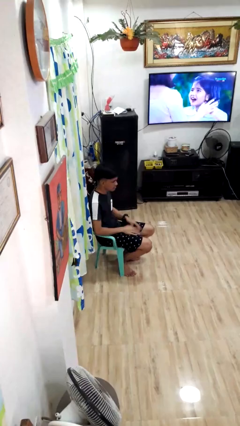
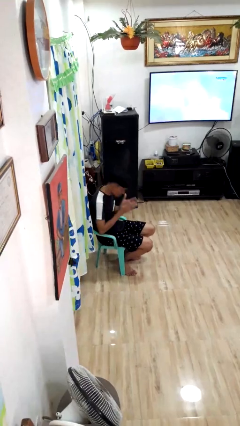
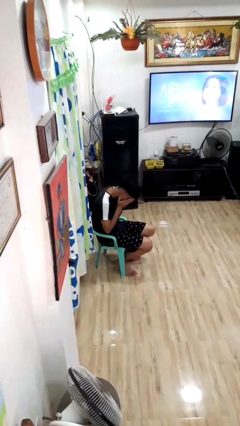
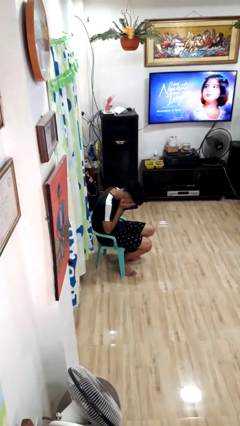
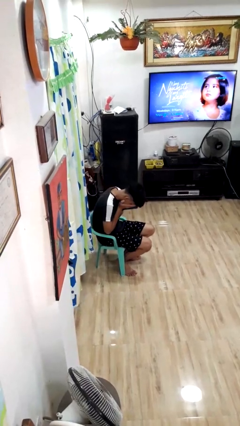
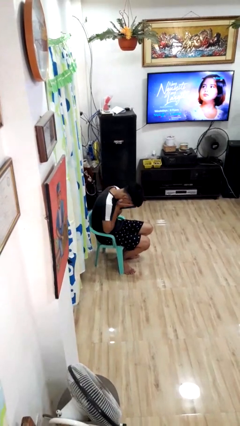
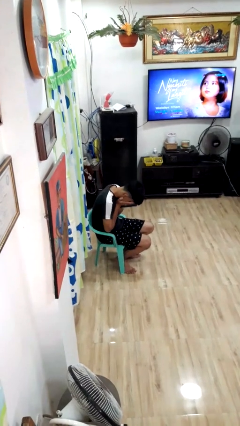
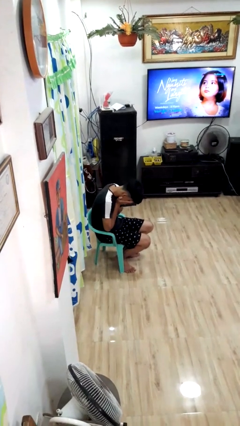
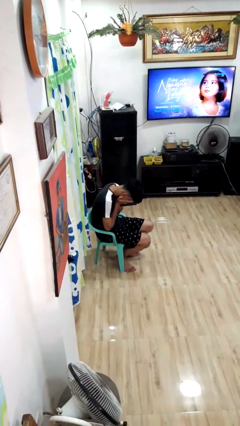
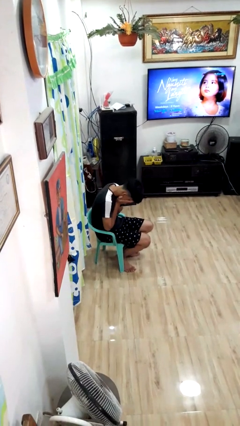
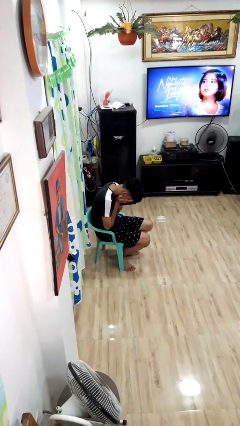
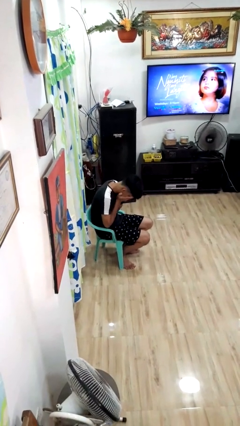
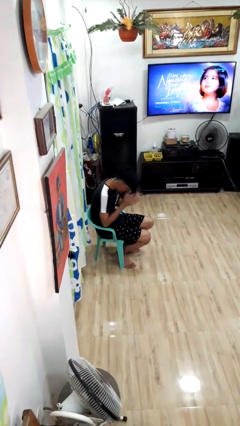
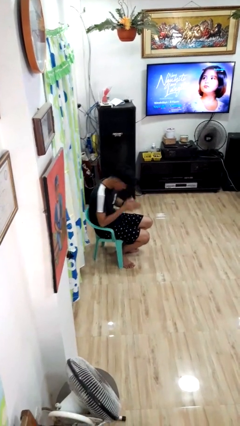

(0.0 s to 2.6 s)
person covers face with hands

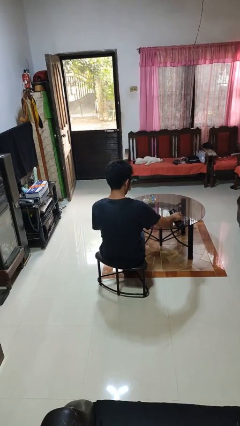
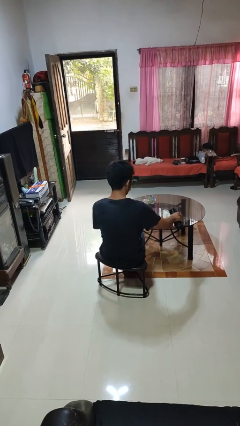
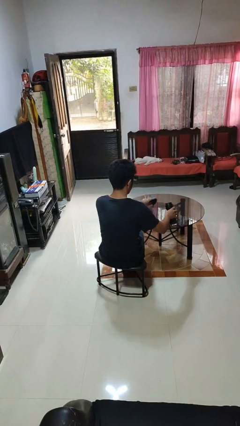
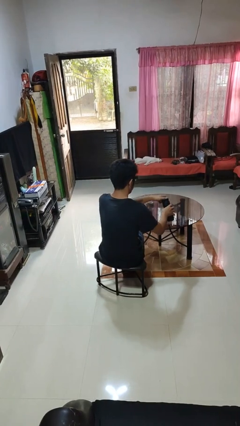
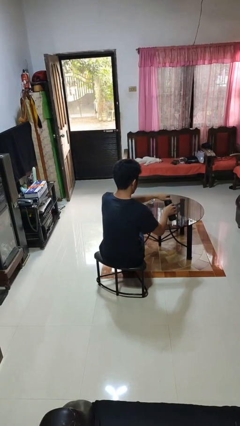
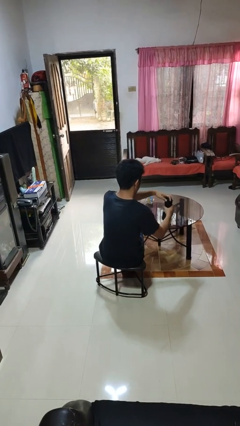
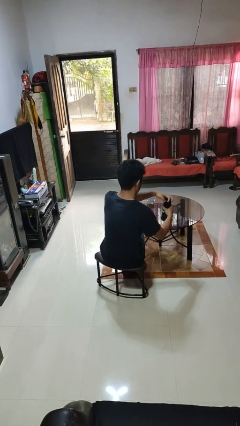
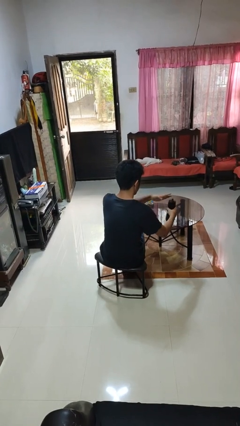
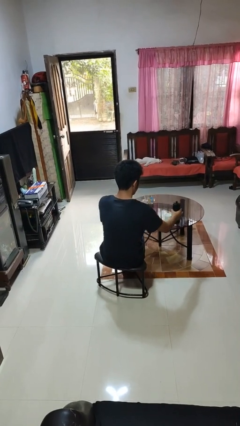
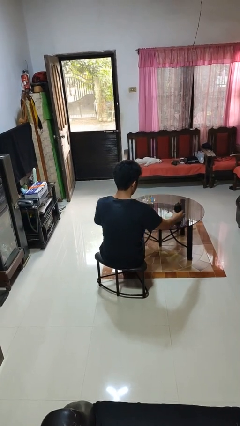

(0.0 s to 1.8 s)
person screws lid to bottle

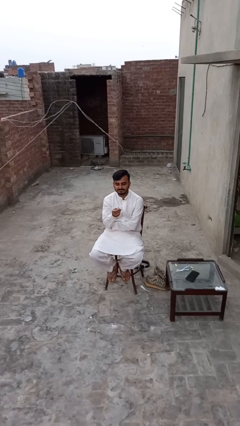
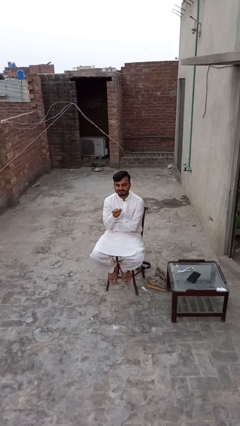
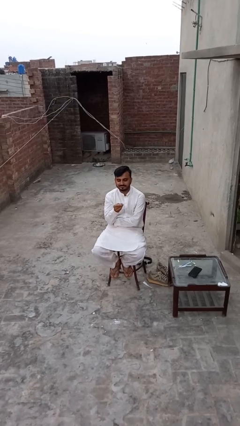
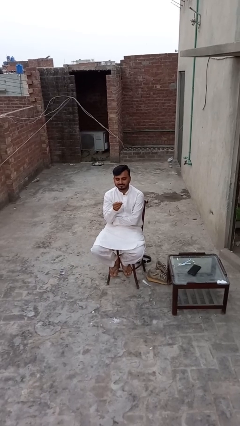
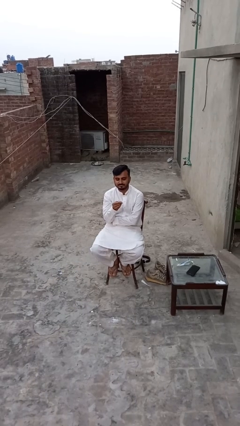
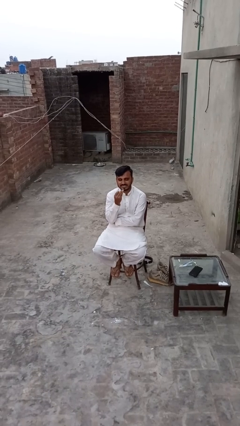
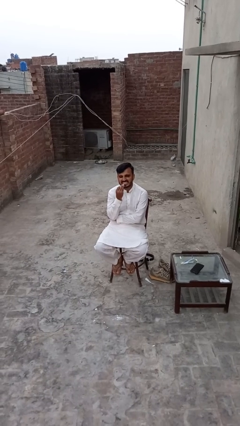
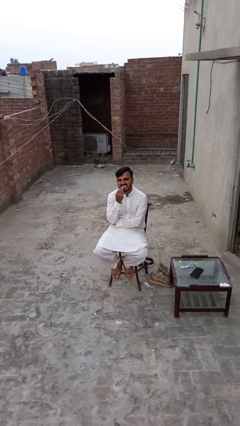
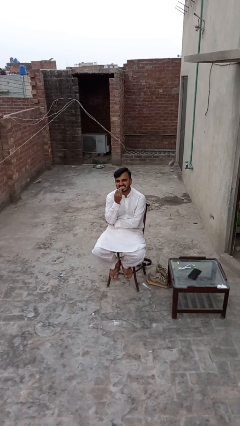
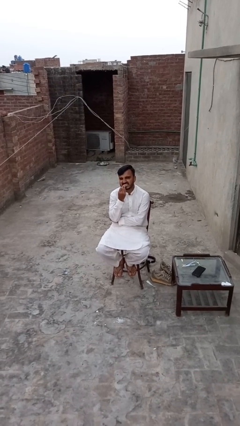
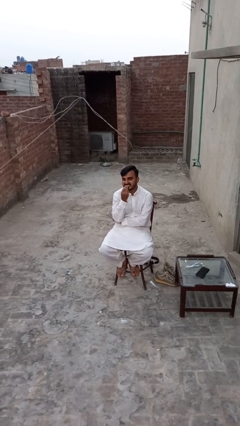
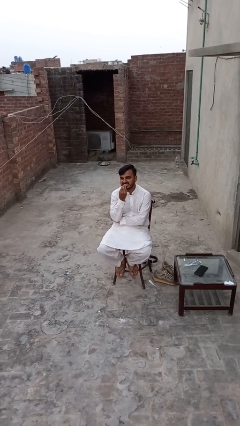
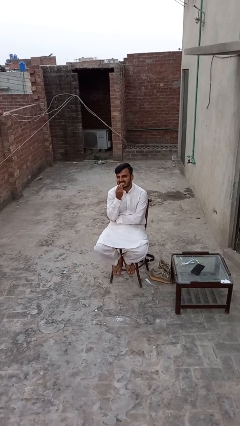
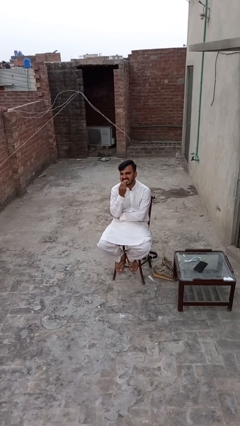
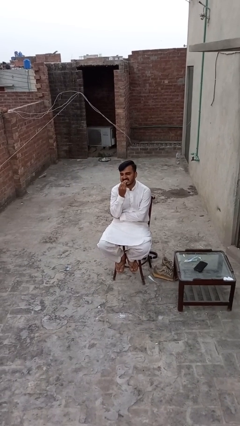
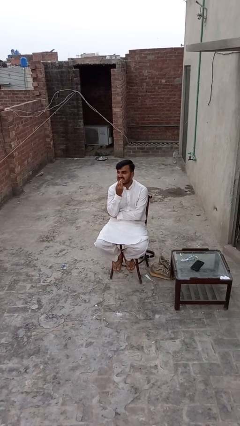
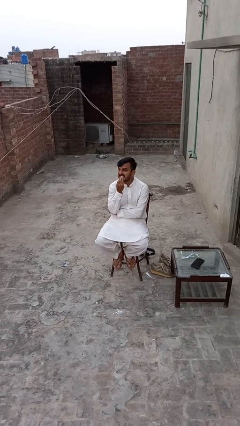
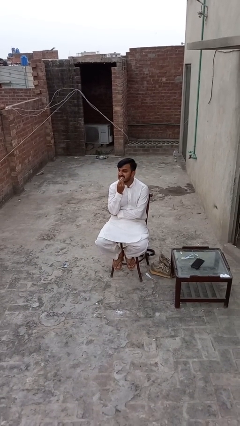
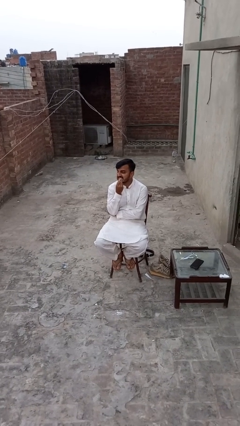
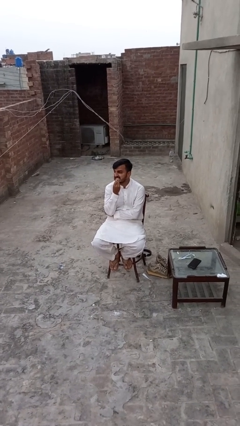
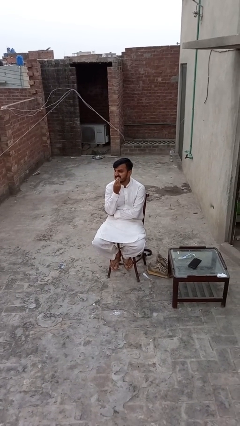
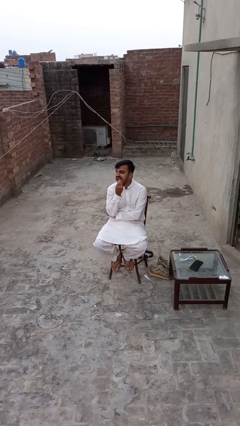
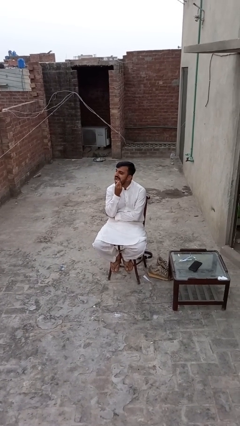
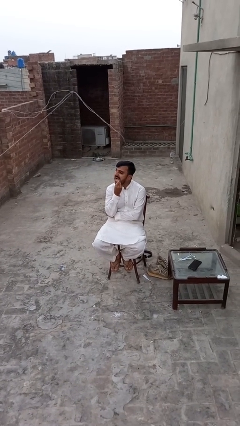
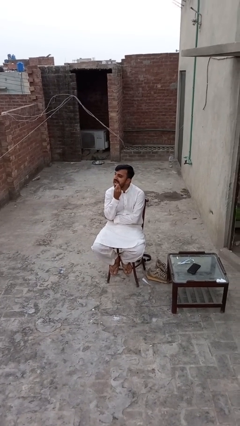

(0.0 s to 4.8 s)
person flosses

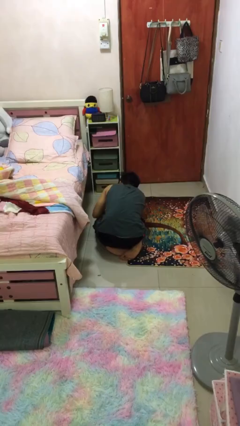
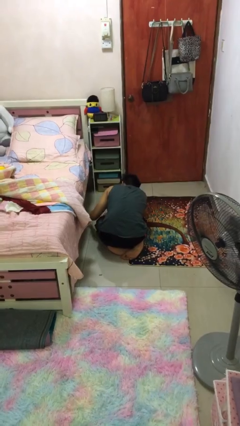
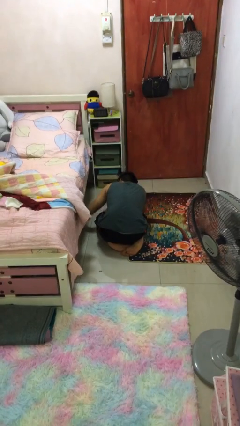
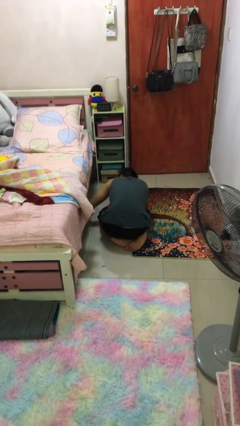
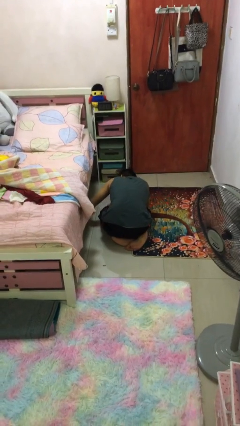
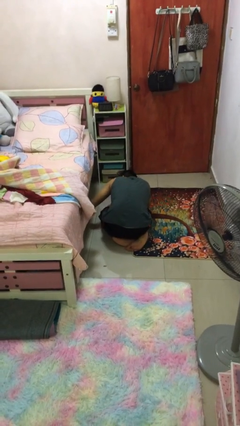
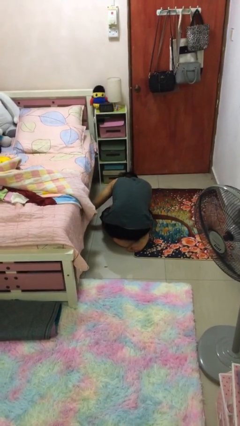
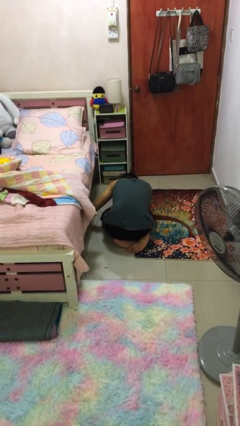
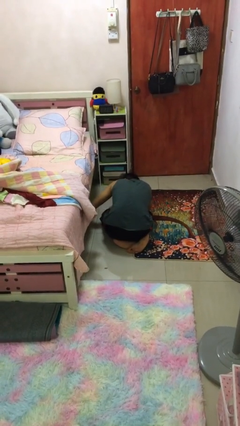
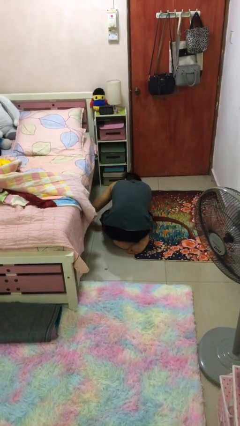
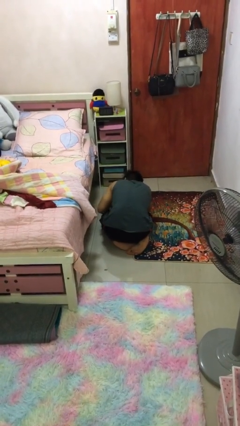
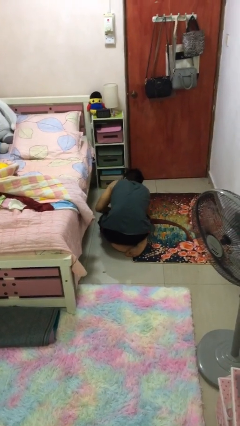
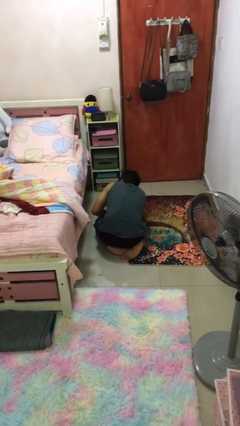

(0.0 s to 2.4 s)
person searches under bed

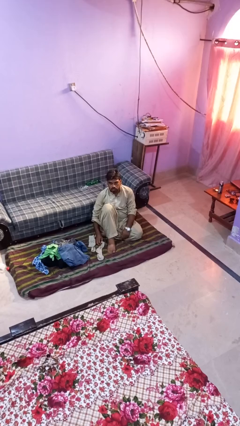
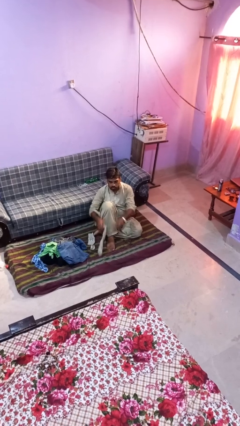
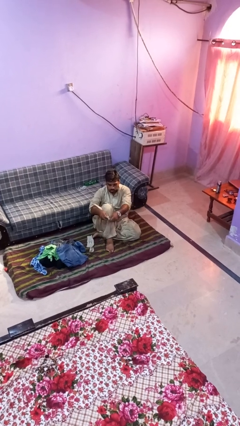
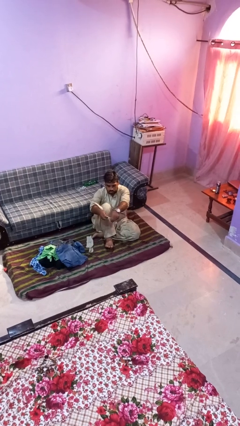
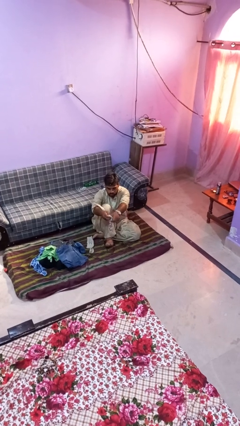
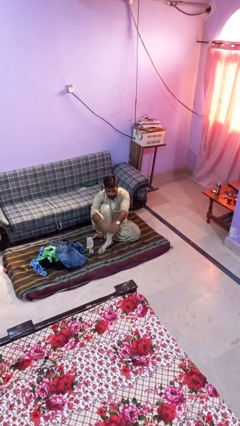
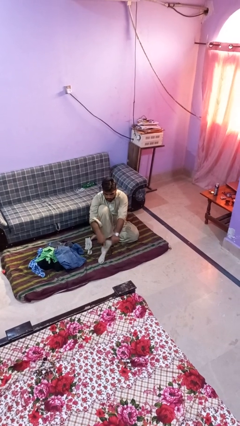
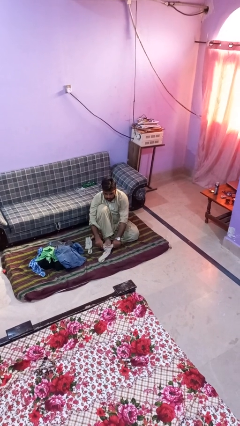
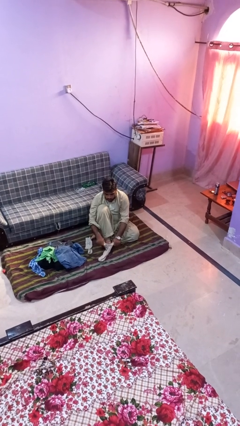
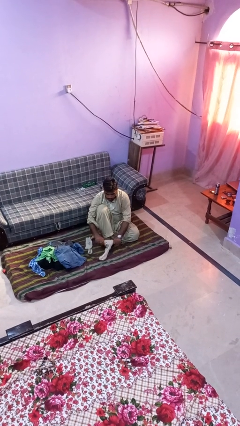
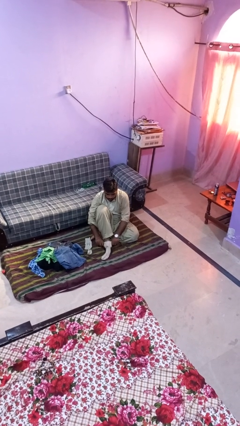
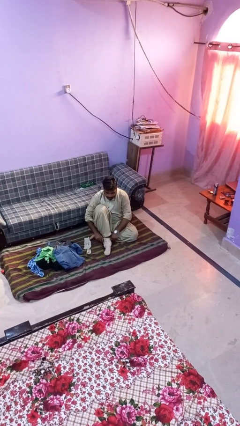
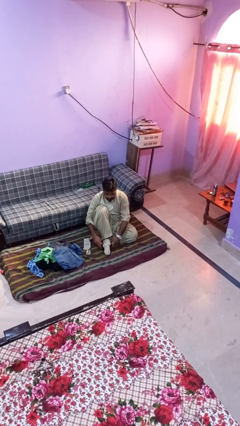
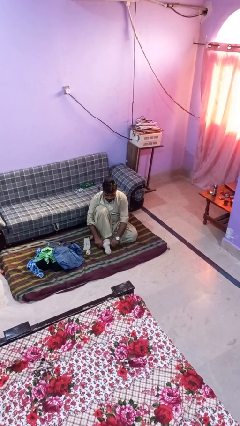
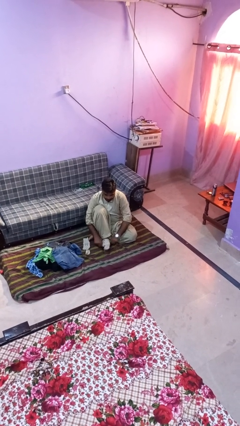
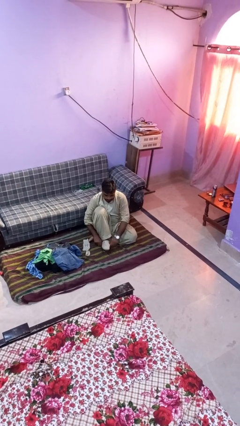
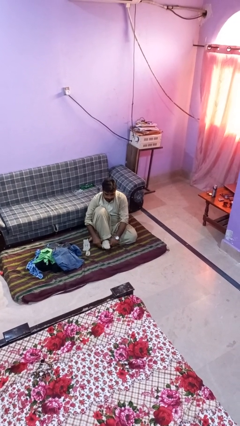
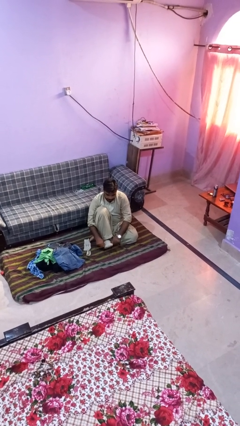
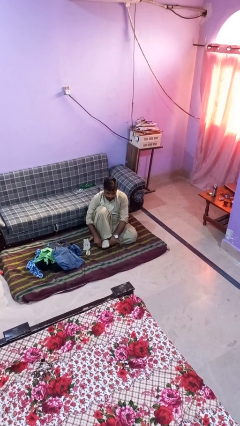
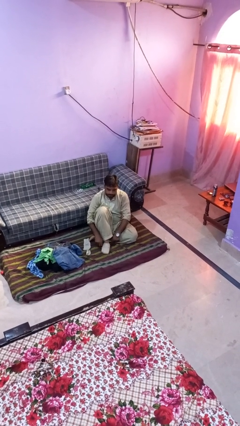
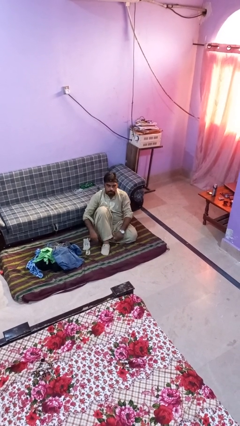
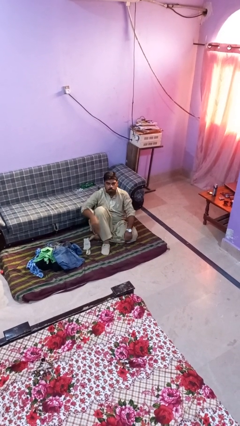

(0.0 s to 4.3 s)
person puts on socks

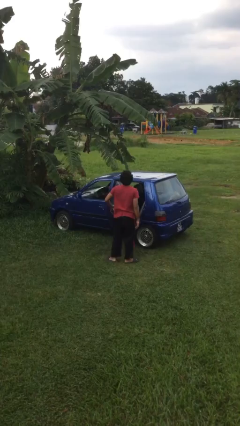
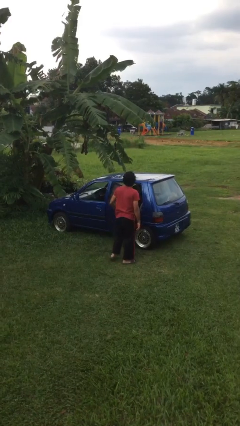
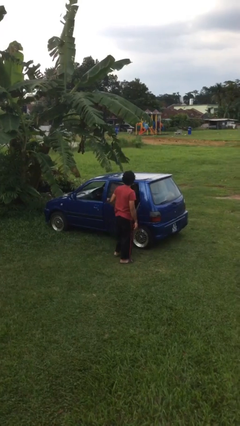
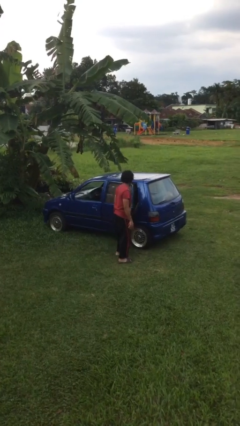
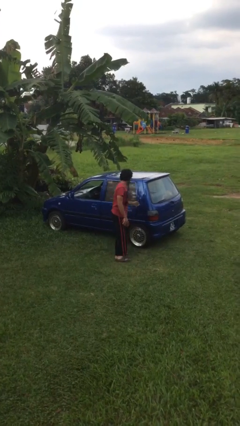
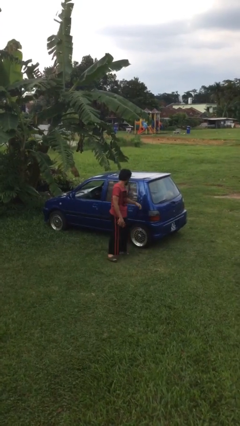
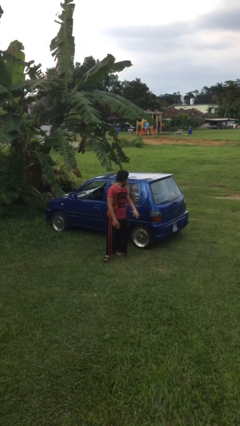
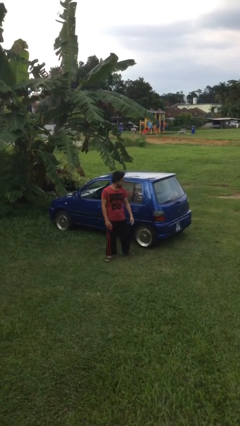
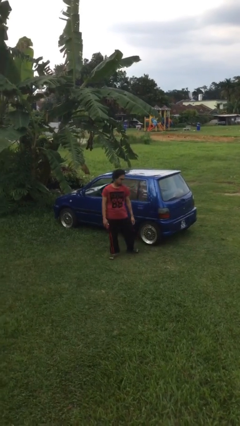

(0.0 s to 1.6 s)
person closes car door
